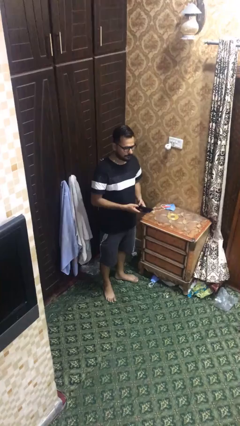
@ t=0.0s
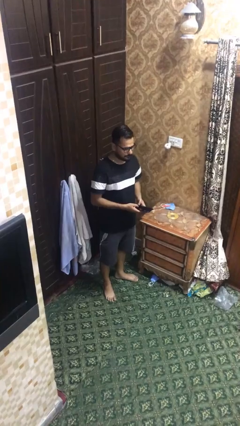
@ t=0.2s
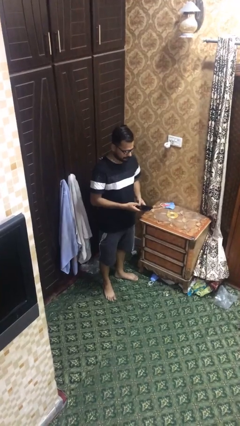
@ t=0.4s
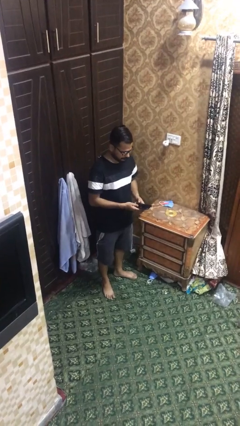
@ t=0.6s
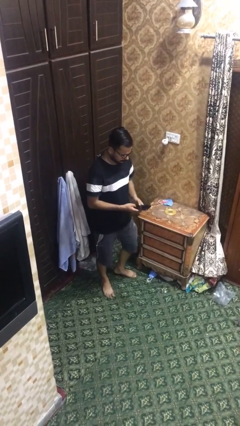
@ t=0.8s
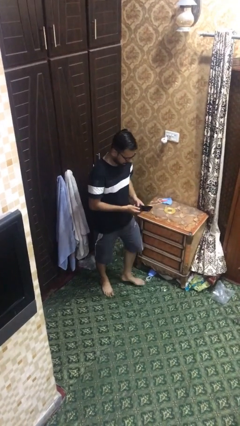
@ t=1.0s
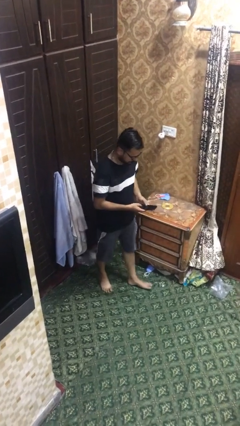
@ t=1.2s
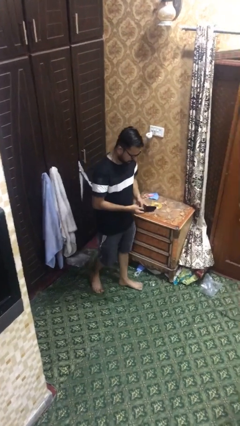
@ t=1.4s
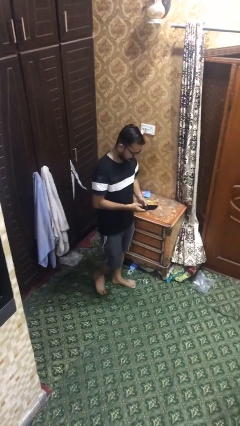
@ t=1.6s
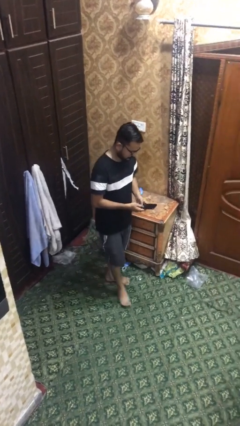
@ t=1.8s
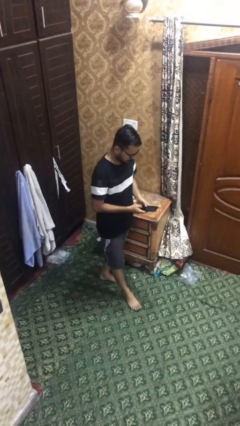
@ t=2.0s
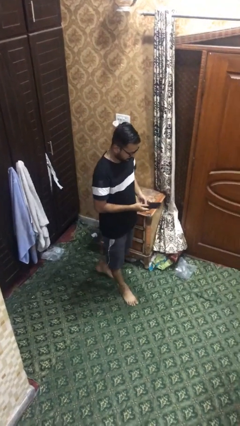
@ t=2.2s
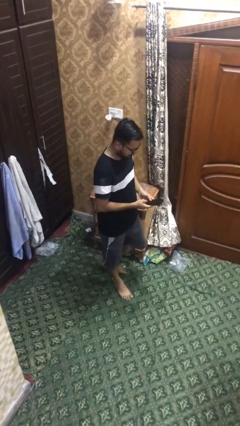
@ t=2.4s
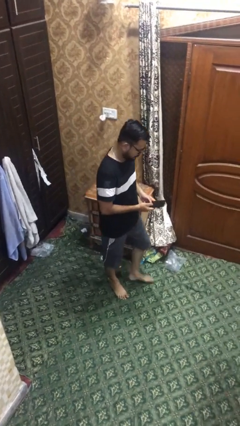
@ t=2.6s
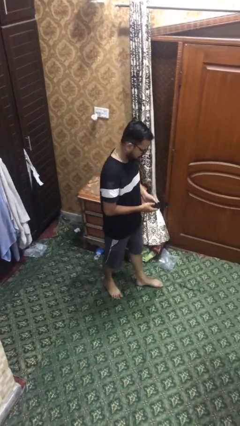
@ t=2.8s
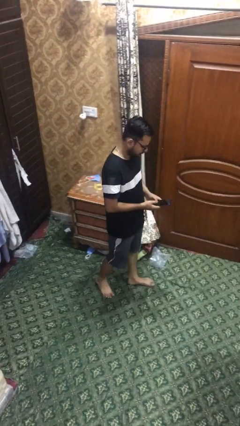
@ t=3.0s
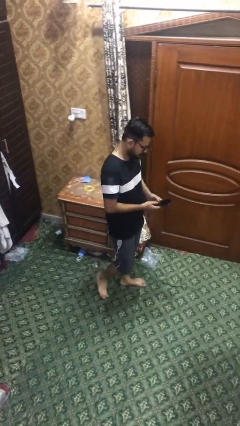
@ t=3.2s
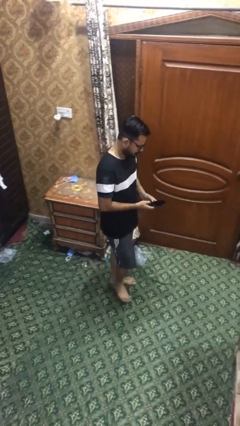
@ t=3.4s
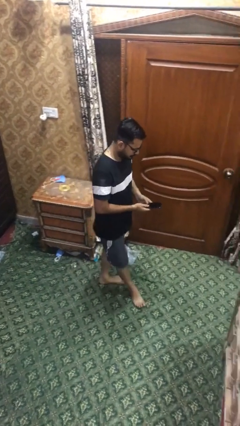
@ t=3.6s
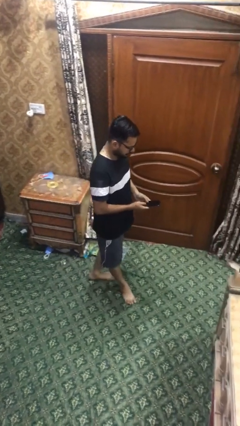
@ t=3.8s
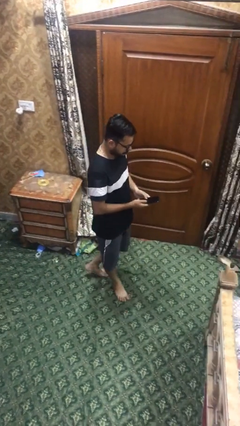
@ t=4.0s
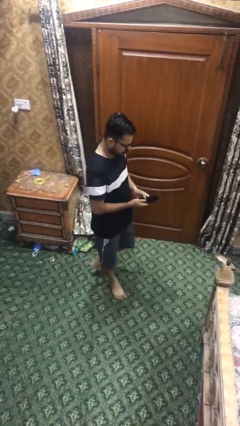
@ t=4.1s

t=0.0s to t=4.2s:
person texts on phone

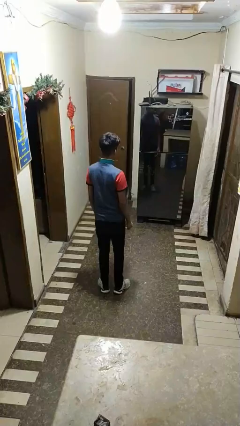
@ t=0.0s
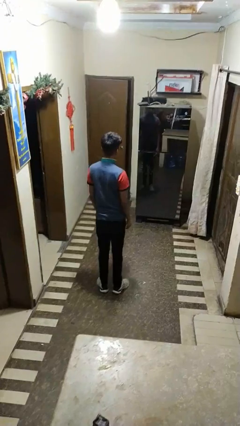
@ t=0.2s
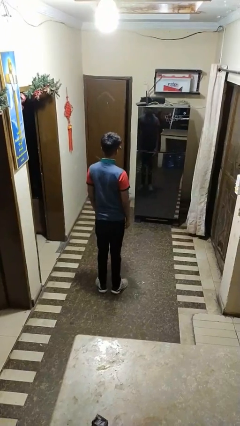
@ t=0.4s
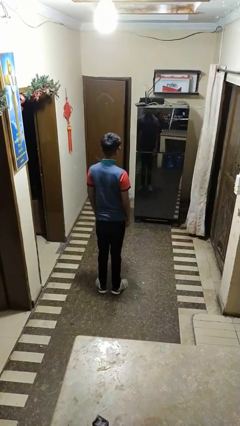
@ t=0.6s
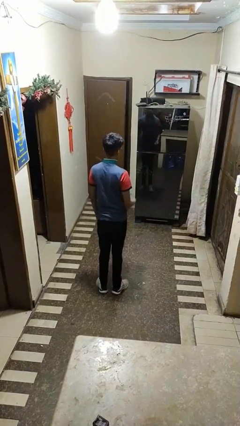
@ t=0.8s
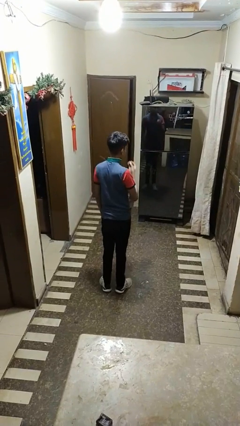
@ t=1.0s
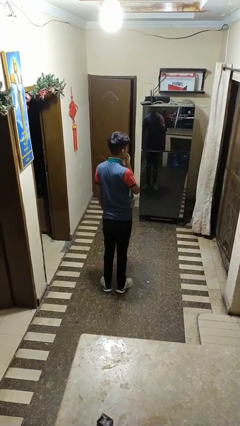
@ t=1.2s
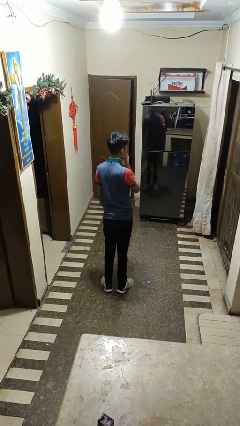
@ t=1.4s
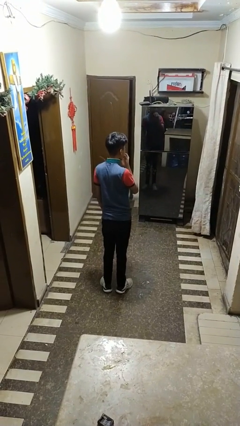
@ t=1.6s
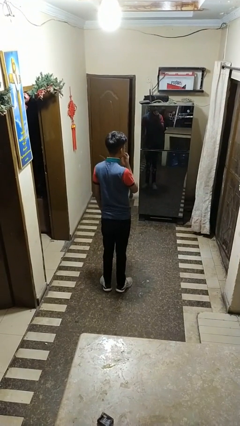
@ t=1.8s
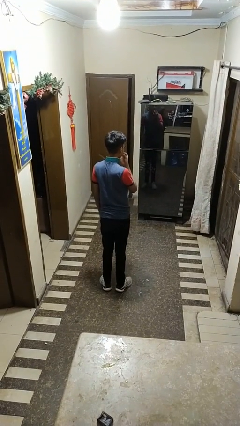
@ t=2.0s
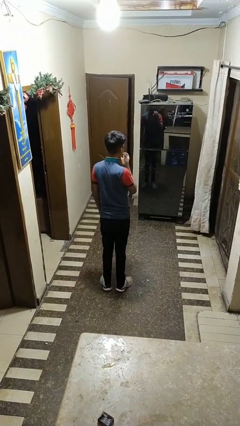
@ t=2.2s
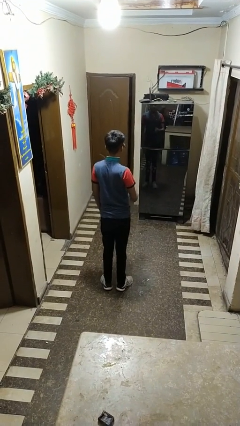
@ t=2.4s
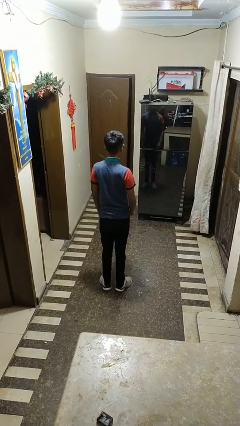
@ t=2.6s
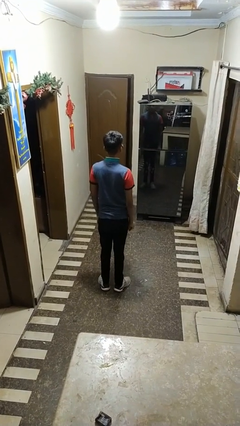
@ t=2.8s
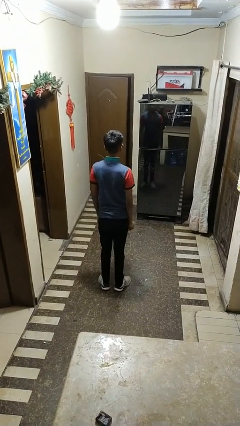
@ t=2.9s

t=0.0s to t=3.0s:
person flosses

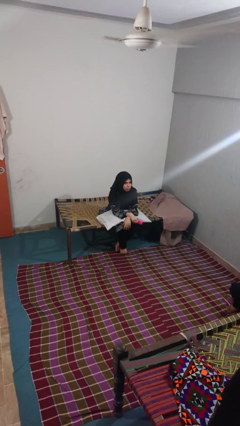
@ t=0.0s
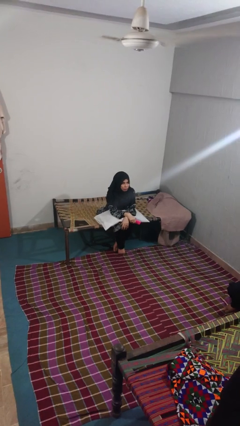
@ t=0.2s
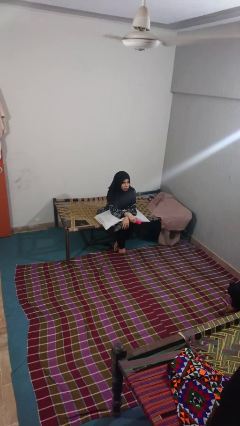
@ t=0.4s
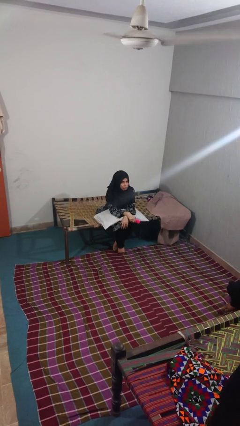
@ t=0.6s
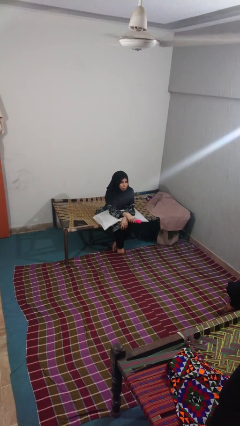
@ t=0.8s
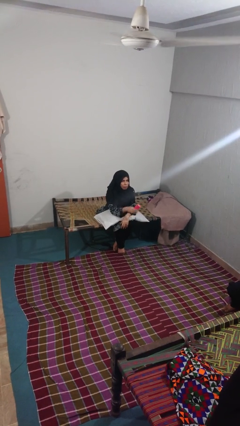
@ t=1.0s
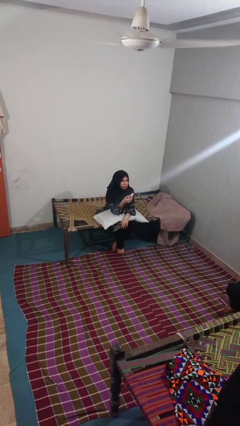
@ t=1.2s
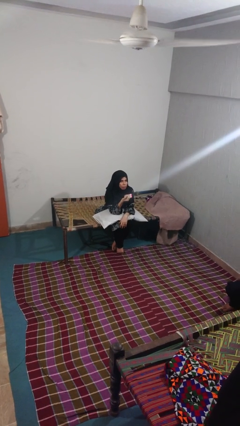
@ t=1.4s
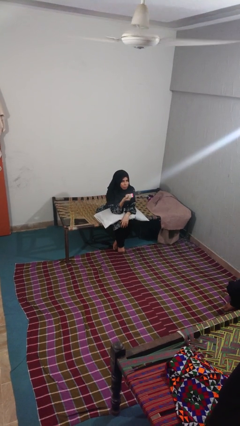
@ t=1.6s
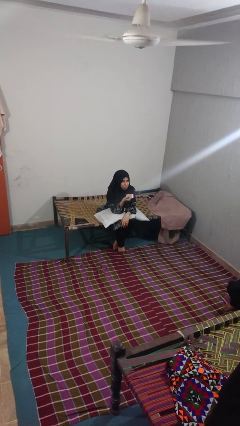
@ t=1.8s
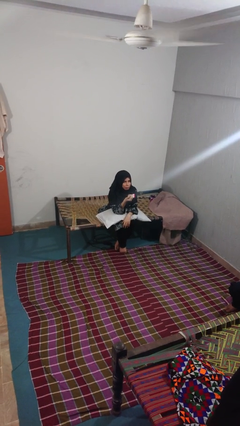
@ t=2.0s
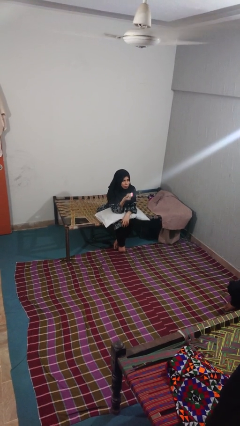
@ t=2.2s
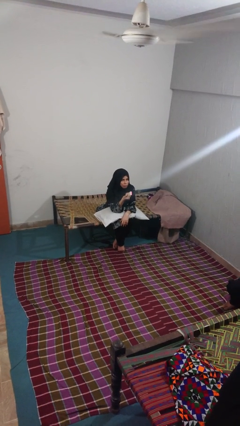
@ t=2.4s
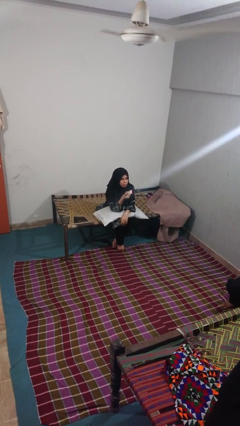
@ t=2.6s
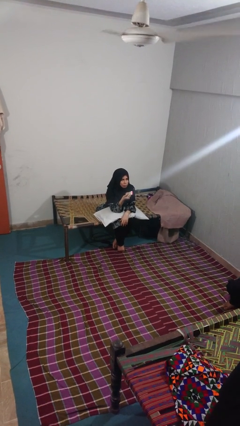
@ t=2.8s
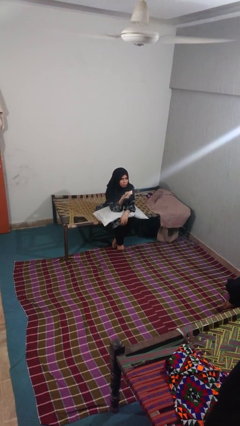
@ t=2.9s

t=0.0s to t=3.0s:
person uses television remote

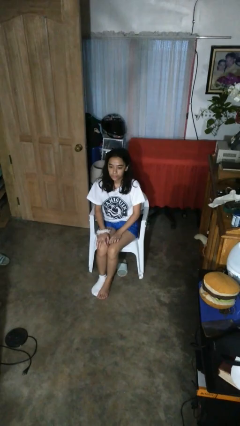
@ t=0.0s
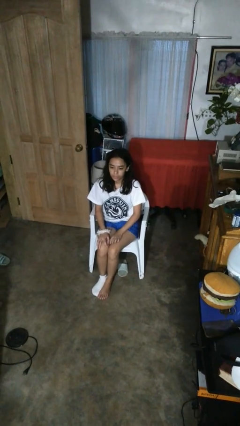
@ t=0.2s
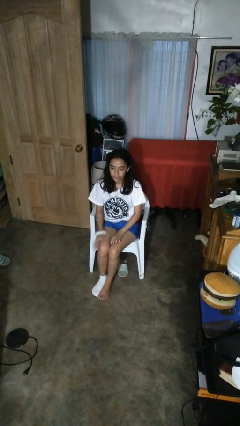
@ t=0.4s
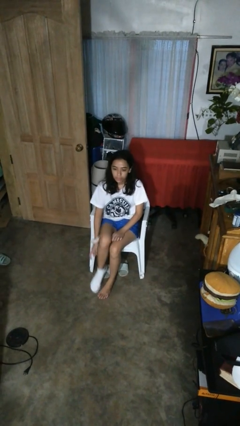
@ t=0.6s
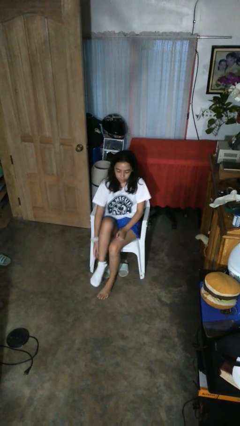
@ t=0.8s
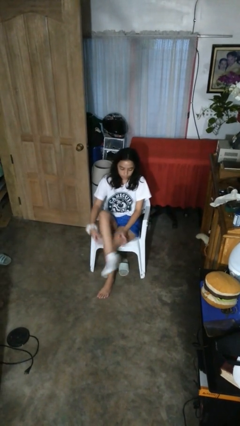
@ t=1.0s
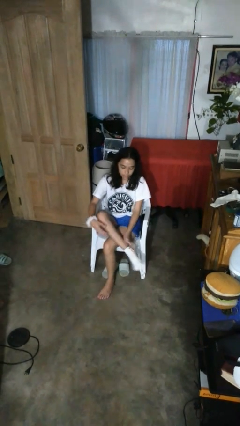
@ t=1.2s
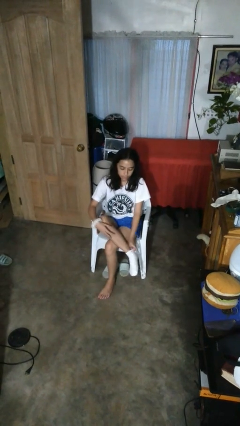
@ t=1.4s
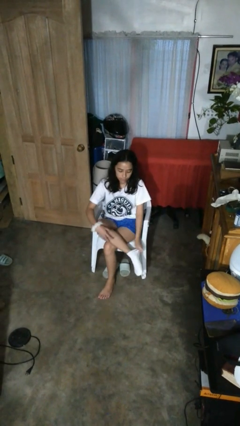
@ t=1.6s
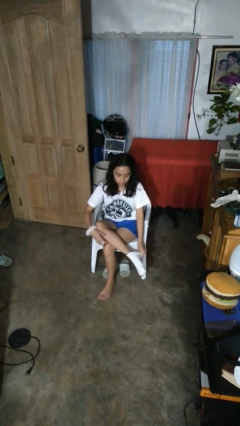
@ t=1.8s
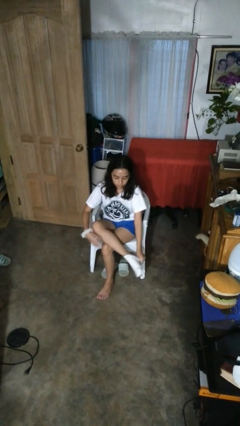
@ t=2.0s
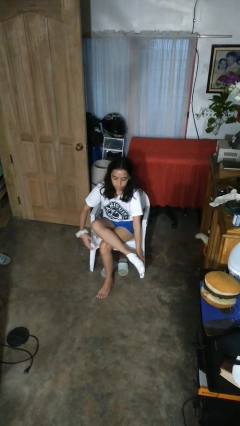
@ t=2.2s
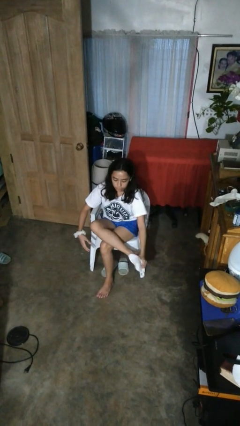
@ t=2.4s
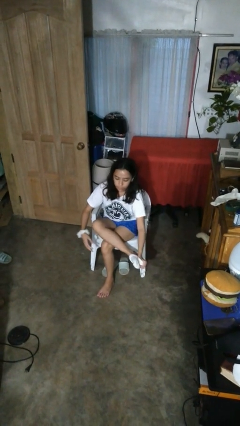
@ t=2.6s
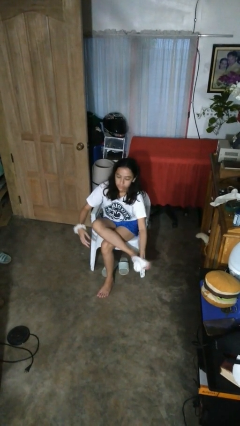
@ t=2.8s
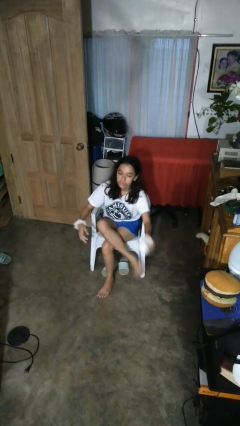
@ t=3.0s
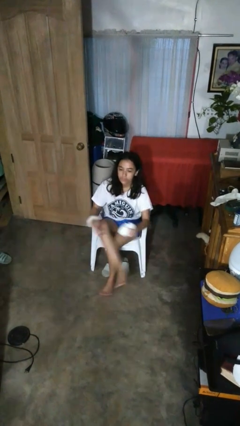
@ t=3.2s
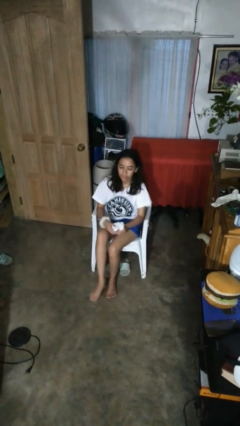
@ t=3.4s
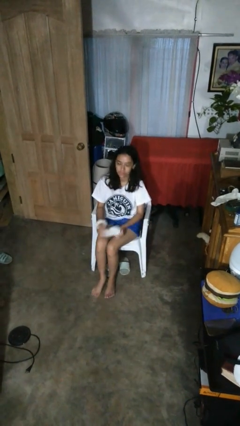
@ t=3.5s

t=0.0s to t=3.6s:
person takes off socks

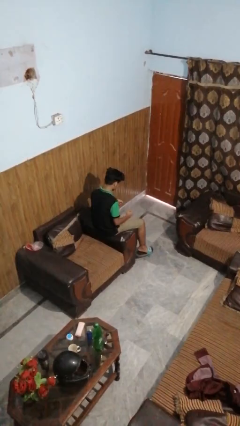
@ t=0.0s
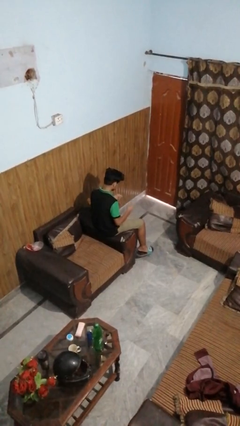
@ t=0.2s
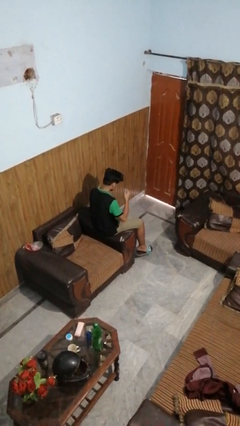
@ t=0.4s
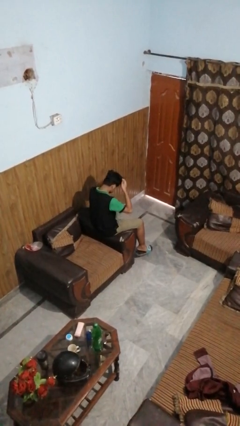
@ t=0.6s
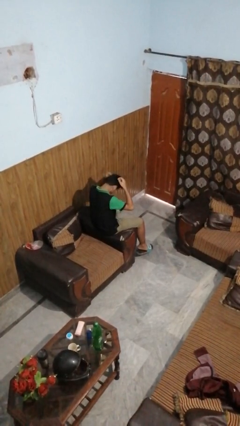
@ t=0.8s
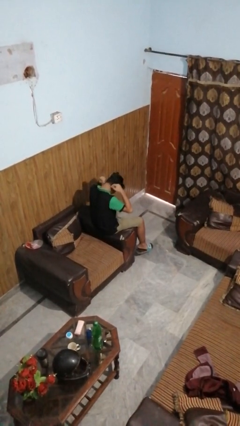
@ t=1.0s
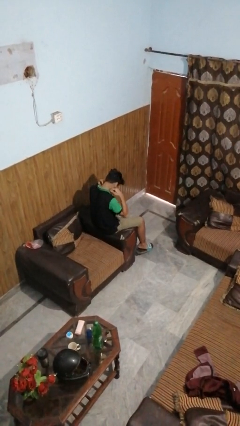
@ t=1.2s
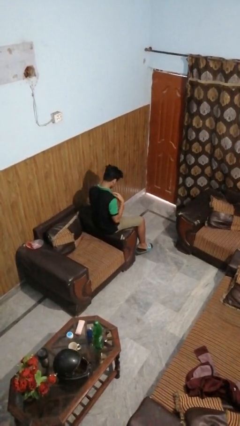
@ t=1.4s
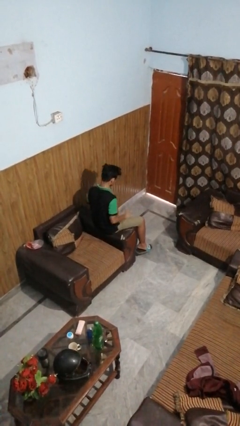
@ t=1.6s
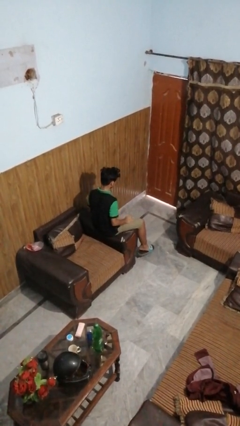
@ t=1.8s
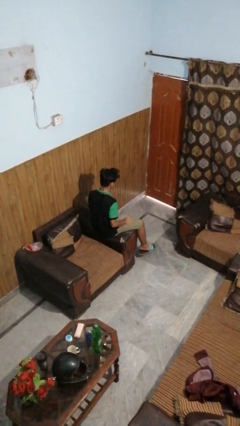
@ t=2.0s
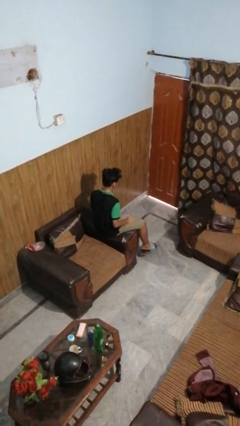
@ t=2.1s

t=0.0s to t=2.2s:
person puts on necklace

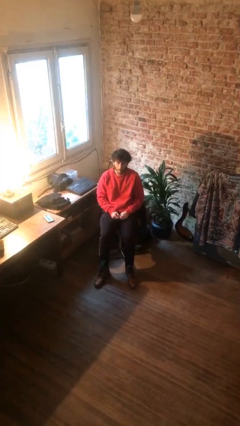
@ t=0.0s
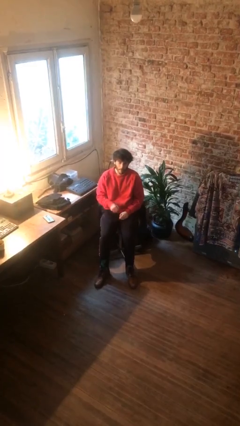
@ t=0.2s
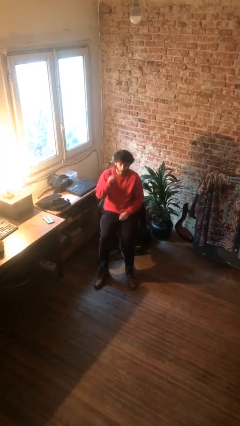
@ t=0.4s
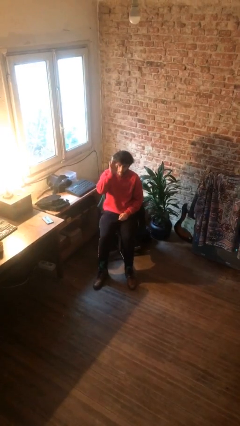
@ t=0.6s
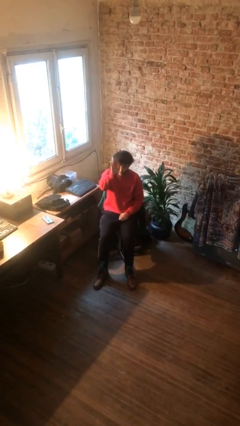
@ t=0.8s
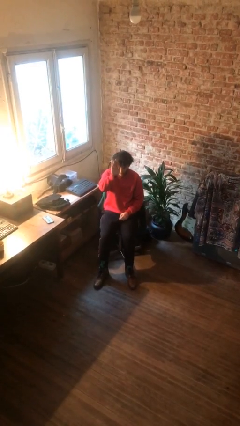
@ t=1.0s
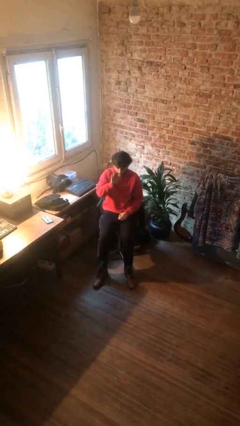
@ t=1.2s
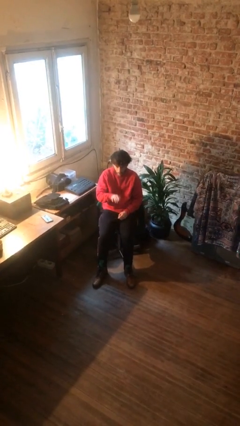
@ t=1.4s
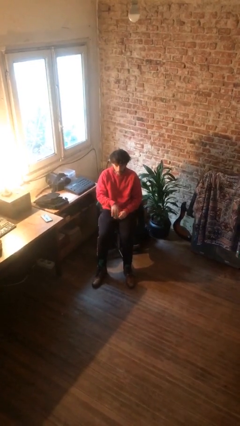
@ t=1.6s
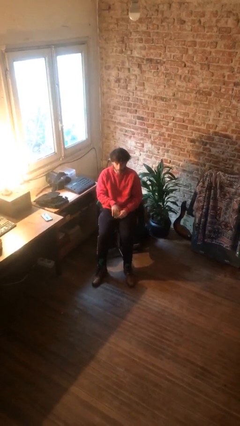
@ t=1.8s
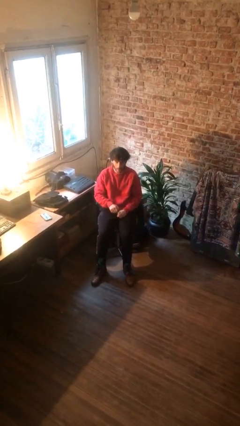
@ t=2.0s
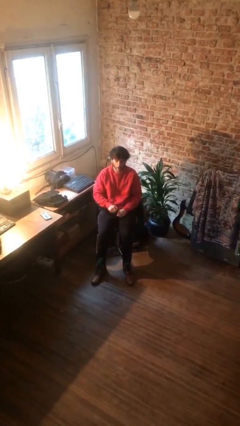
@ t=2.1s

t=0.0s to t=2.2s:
person gestures swipe down
